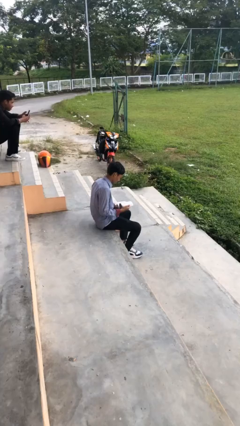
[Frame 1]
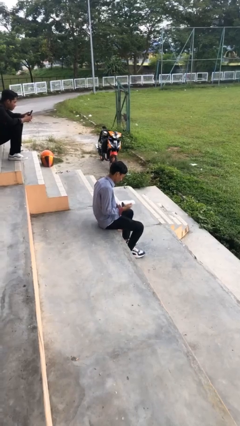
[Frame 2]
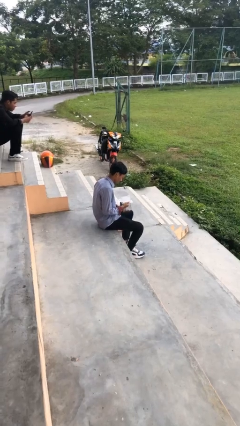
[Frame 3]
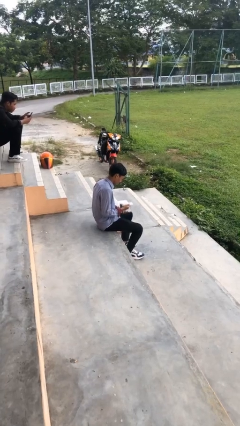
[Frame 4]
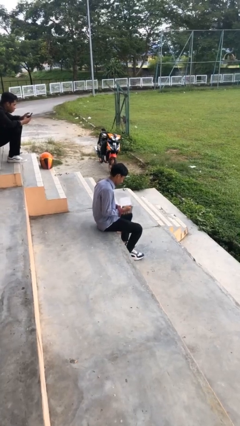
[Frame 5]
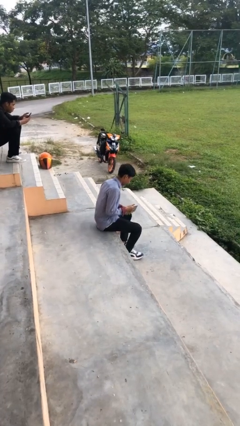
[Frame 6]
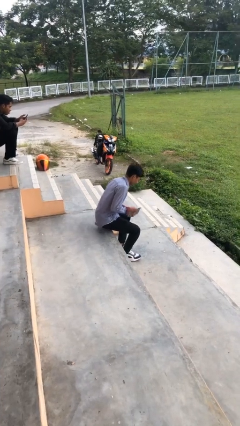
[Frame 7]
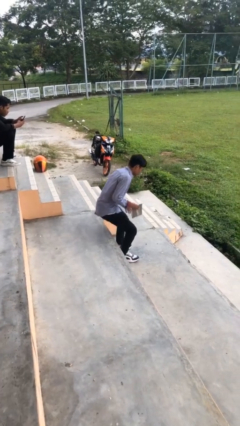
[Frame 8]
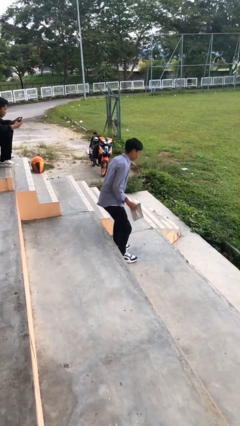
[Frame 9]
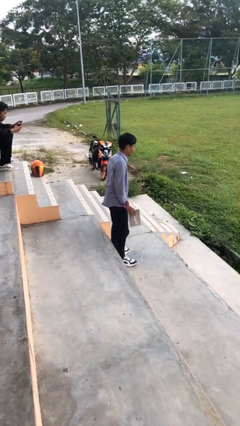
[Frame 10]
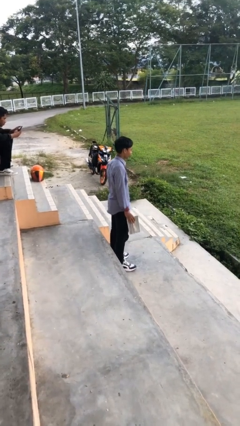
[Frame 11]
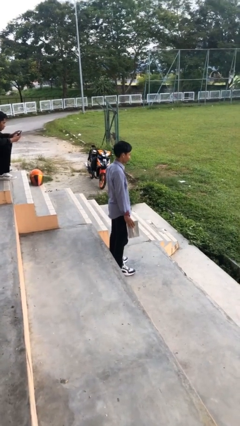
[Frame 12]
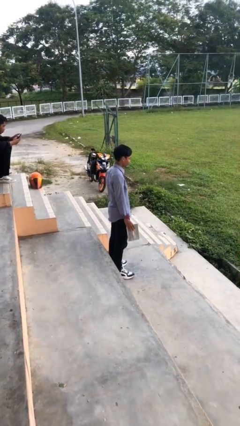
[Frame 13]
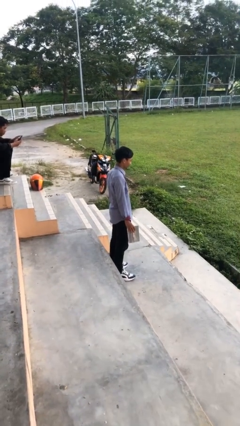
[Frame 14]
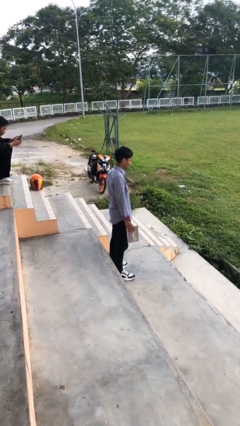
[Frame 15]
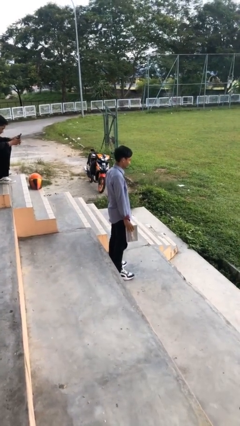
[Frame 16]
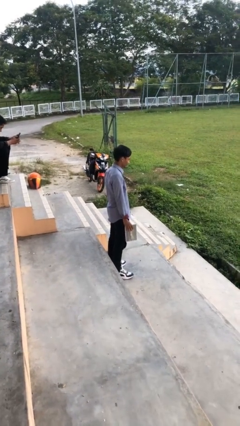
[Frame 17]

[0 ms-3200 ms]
person stands up

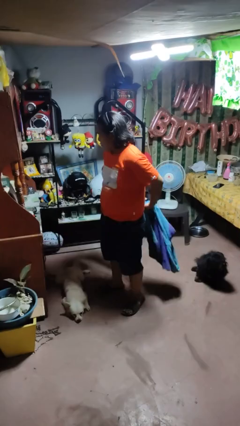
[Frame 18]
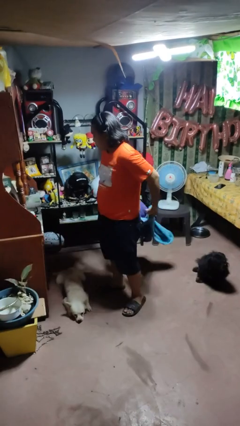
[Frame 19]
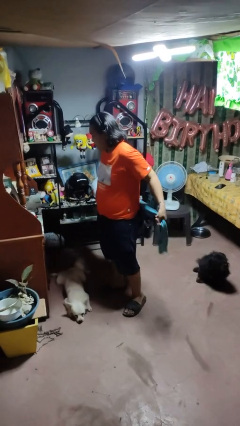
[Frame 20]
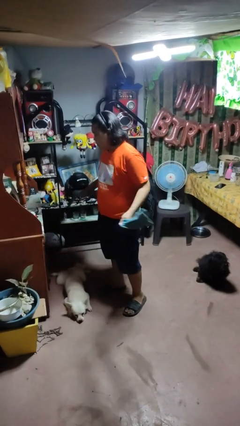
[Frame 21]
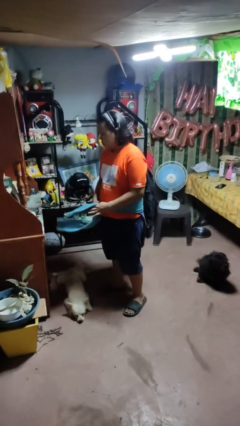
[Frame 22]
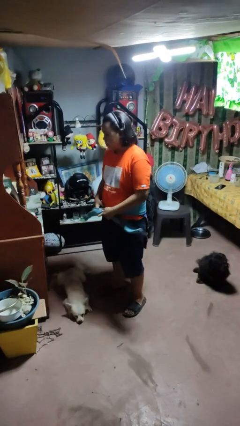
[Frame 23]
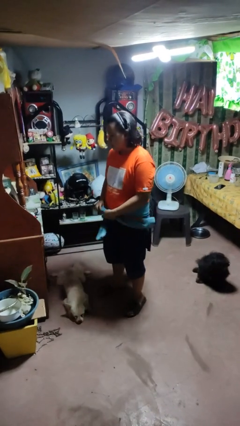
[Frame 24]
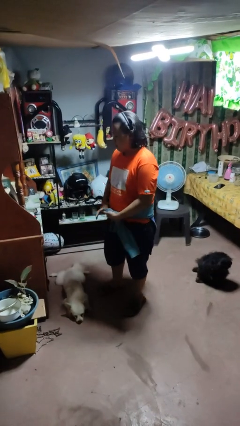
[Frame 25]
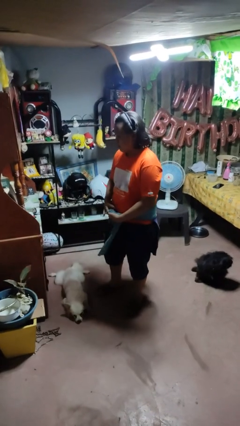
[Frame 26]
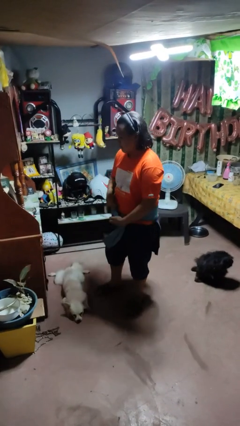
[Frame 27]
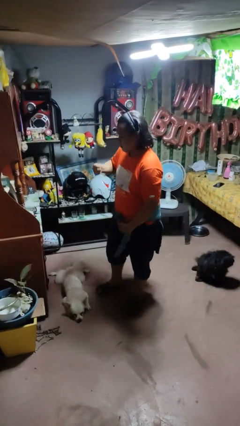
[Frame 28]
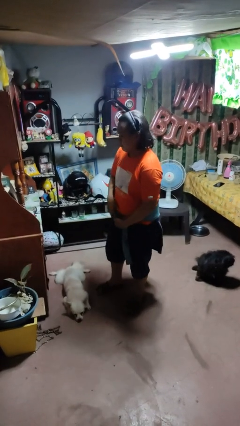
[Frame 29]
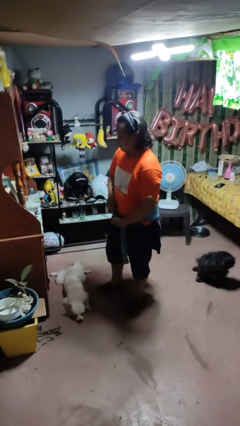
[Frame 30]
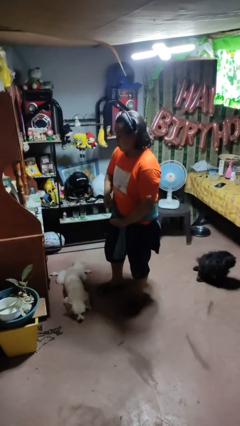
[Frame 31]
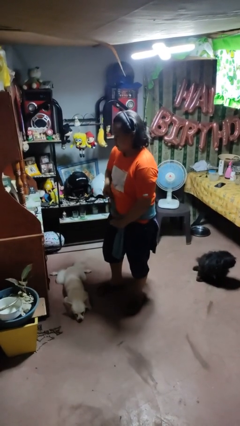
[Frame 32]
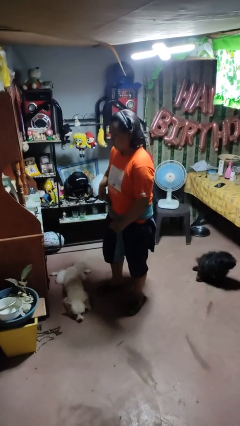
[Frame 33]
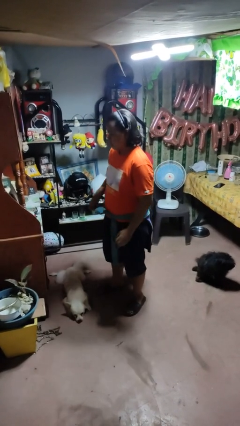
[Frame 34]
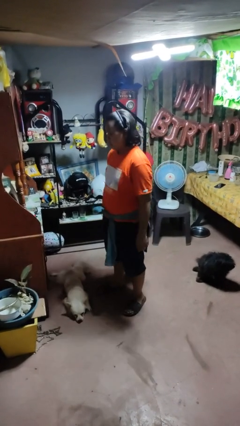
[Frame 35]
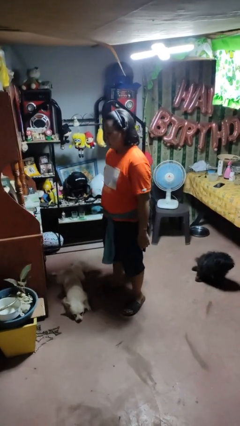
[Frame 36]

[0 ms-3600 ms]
person ties jacket around waist

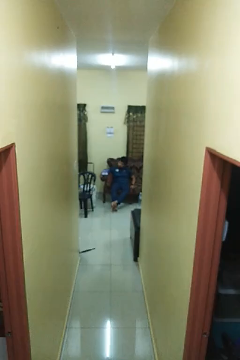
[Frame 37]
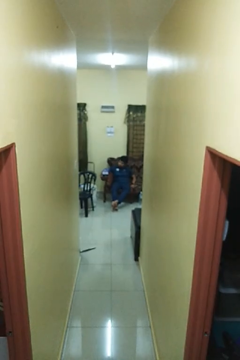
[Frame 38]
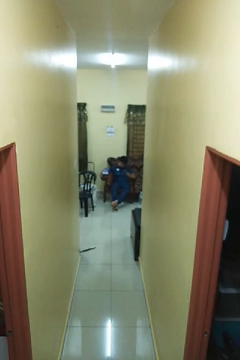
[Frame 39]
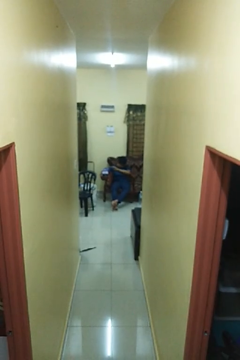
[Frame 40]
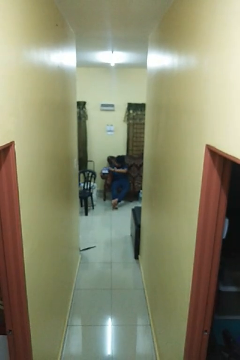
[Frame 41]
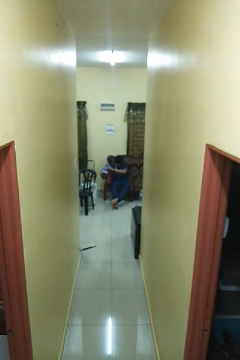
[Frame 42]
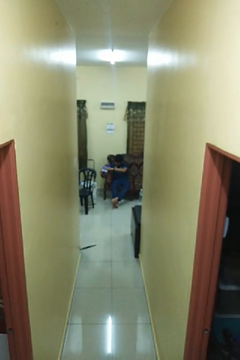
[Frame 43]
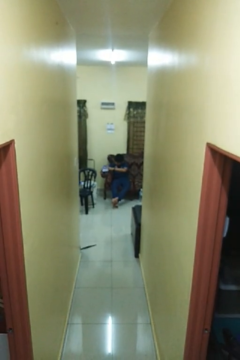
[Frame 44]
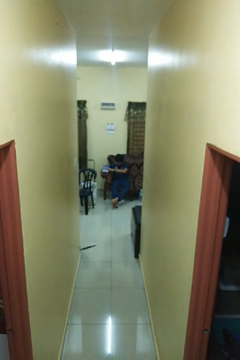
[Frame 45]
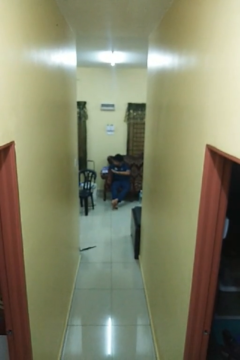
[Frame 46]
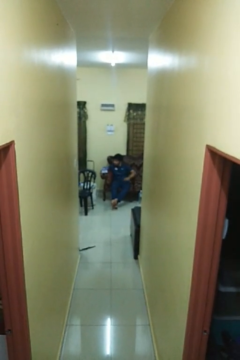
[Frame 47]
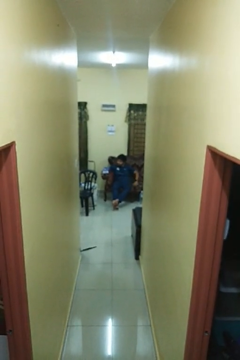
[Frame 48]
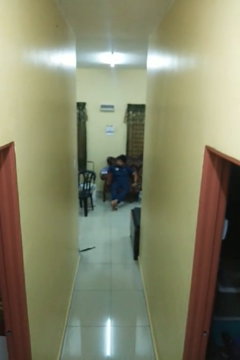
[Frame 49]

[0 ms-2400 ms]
person taps object with finger

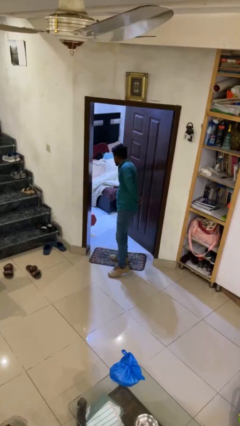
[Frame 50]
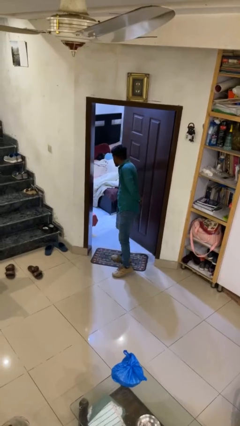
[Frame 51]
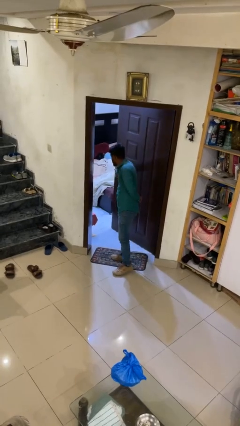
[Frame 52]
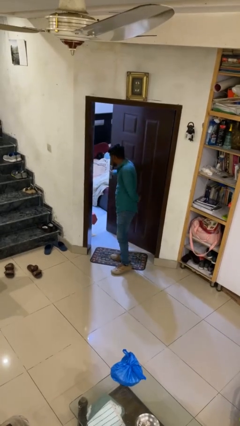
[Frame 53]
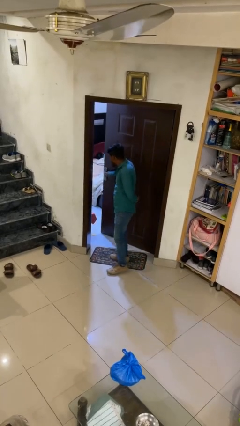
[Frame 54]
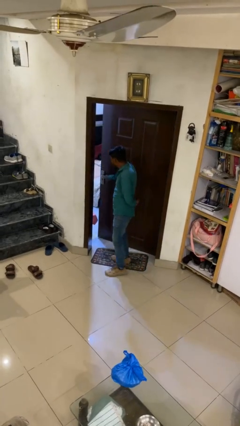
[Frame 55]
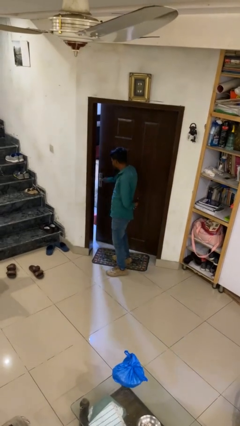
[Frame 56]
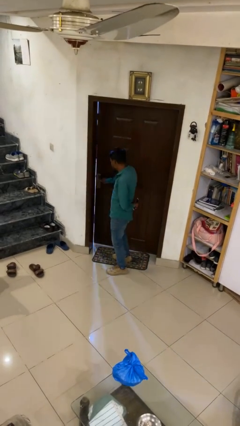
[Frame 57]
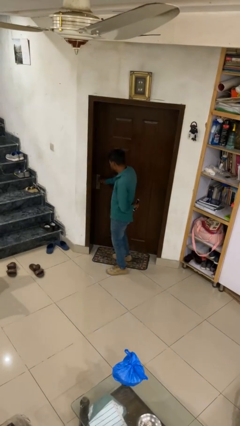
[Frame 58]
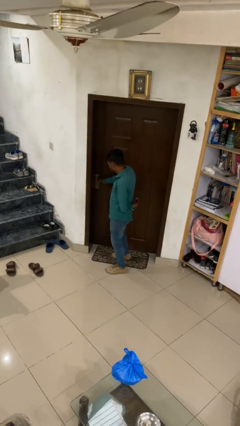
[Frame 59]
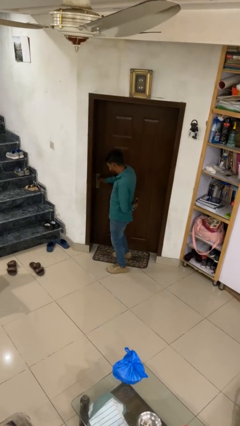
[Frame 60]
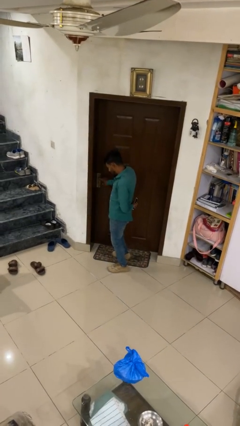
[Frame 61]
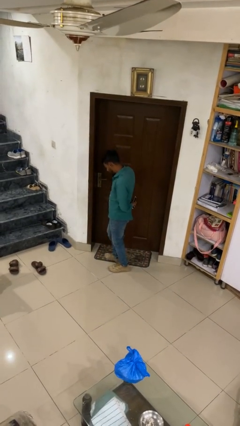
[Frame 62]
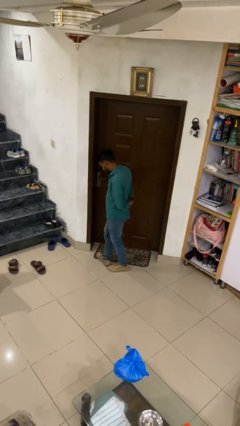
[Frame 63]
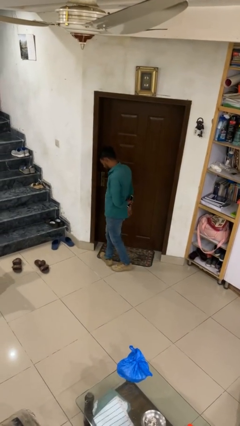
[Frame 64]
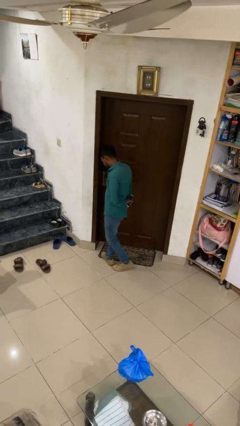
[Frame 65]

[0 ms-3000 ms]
person closes facility door

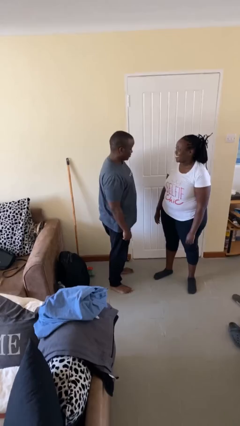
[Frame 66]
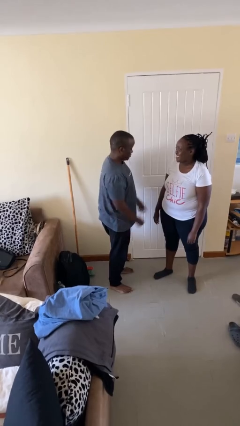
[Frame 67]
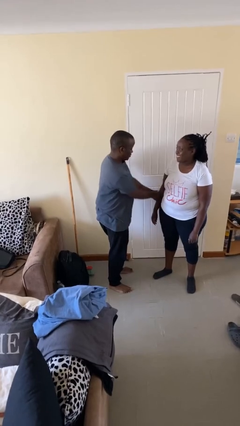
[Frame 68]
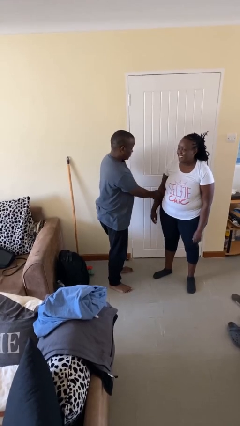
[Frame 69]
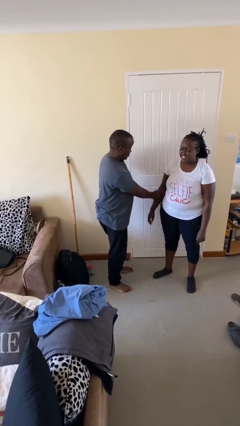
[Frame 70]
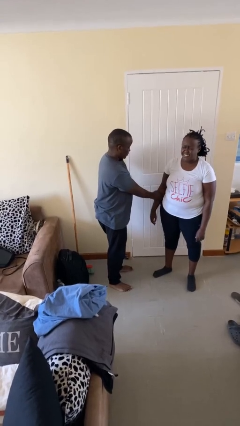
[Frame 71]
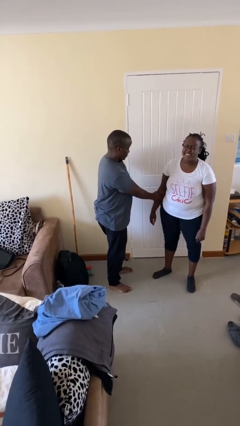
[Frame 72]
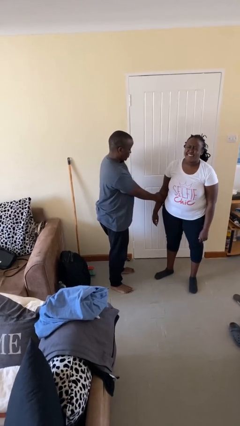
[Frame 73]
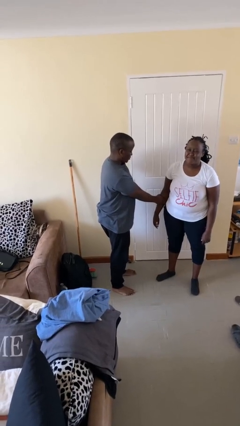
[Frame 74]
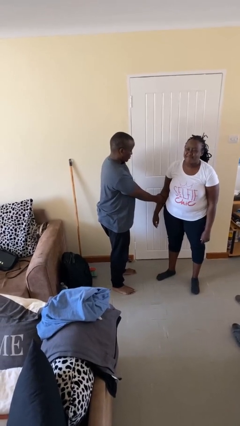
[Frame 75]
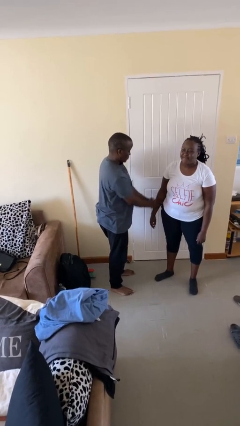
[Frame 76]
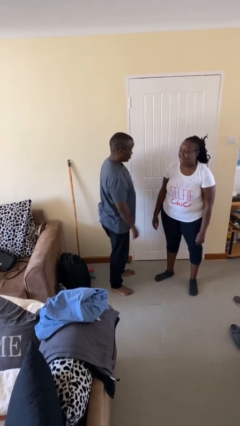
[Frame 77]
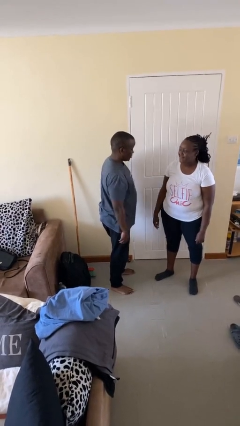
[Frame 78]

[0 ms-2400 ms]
person grabs person by forearm

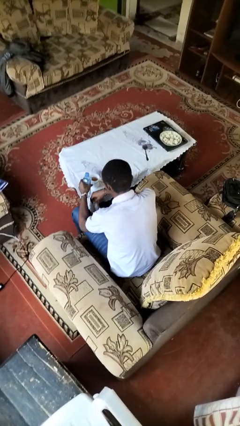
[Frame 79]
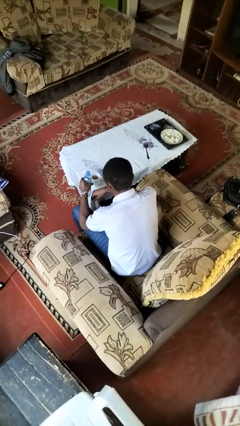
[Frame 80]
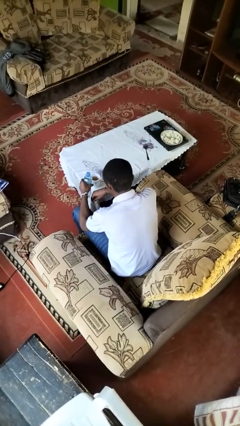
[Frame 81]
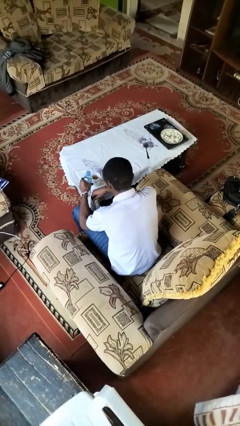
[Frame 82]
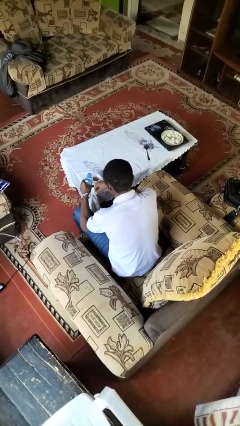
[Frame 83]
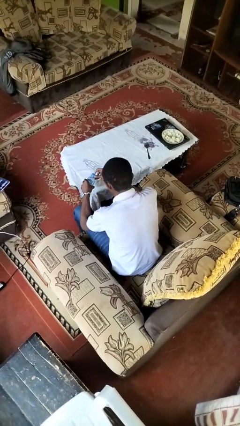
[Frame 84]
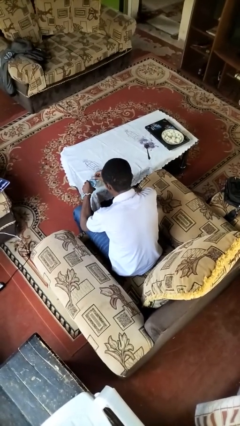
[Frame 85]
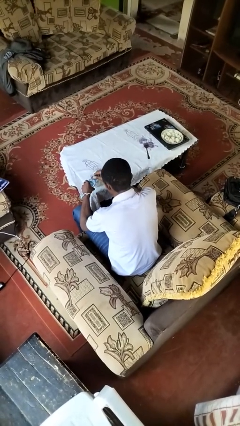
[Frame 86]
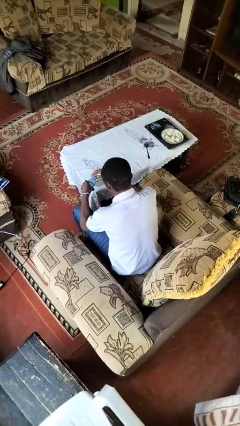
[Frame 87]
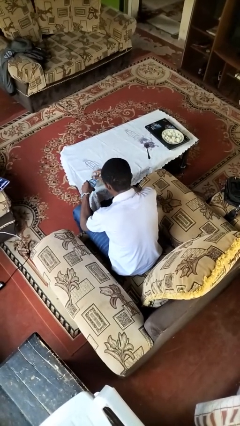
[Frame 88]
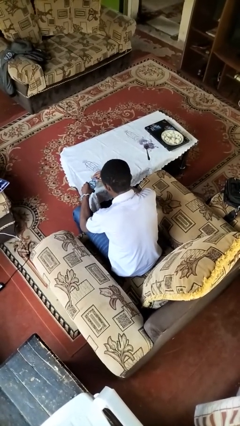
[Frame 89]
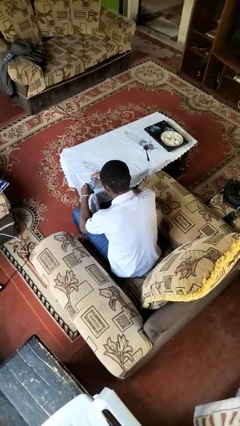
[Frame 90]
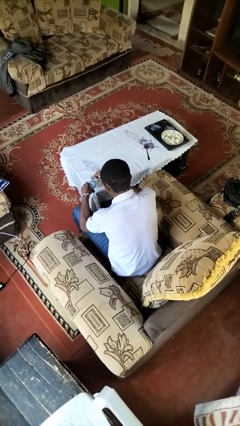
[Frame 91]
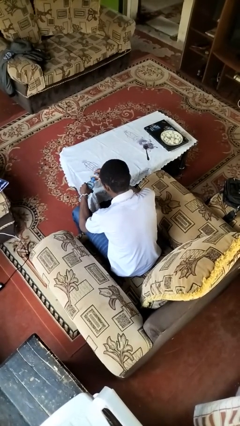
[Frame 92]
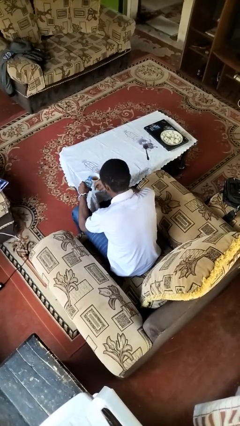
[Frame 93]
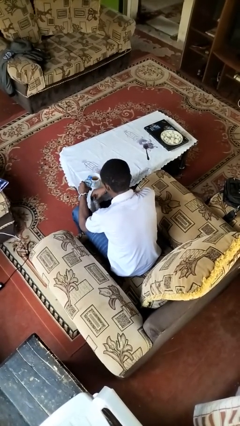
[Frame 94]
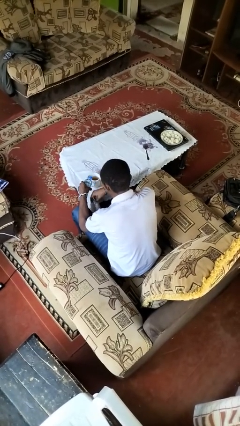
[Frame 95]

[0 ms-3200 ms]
person unscrews lid from bottle
